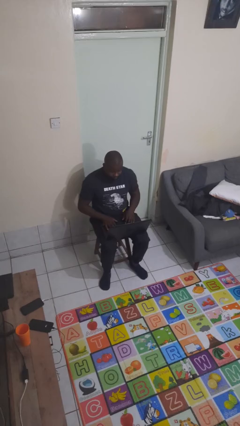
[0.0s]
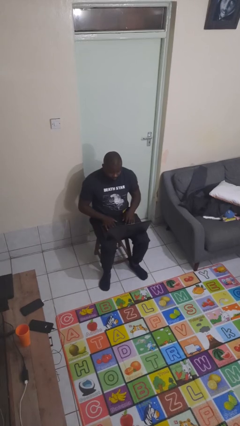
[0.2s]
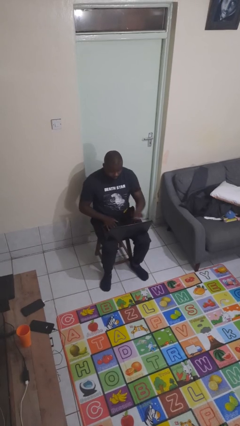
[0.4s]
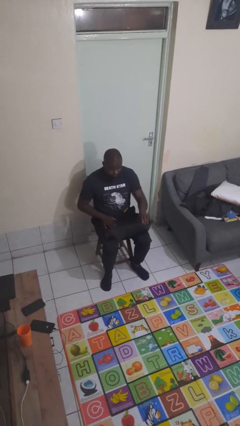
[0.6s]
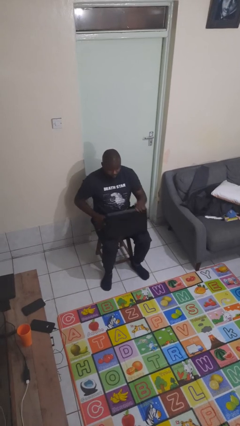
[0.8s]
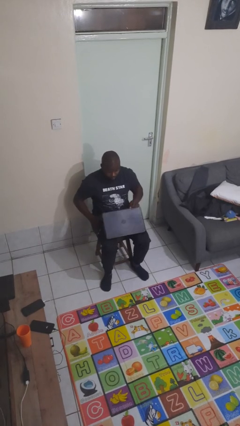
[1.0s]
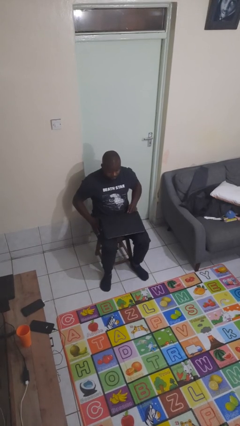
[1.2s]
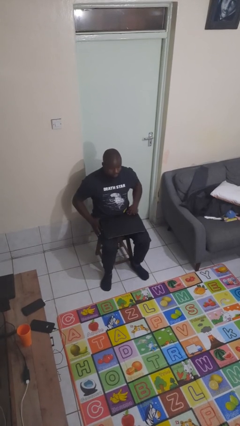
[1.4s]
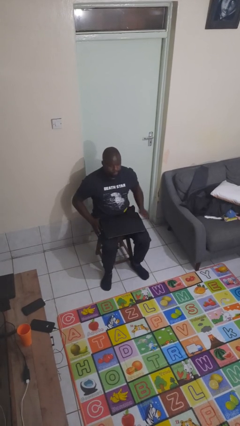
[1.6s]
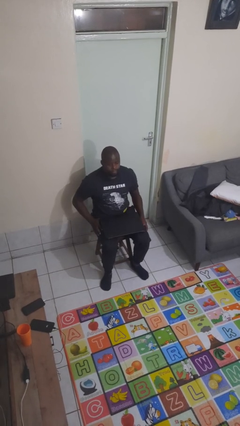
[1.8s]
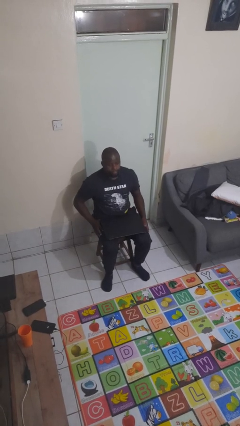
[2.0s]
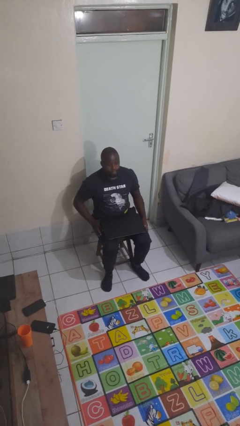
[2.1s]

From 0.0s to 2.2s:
person closes laptop

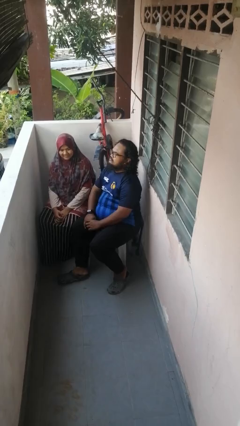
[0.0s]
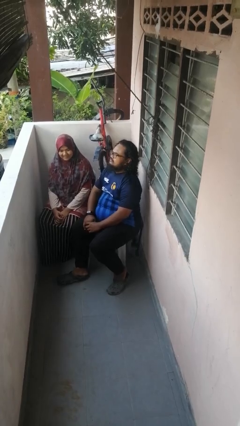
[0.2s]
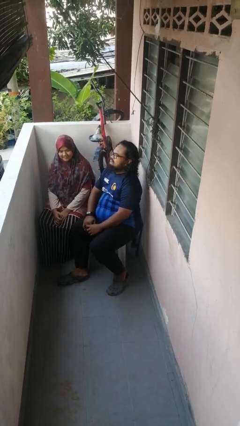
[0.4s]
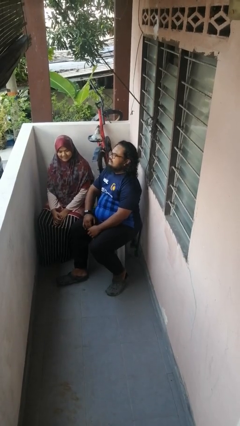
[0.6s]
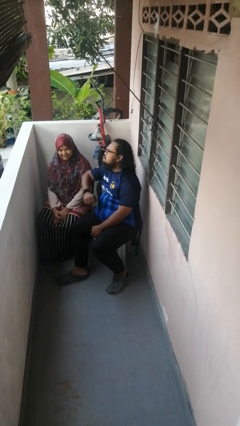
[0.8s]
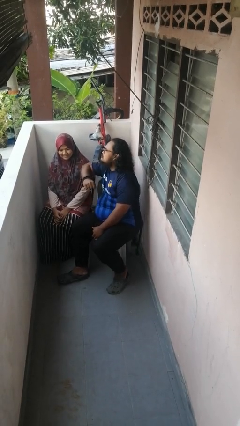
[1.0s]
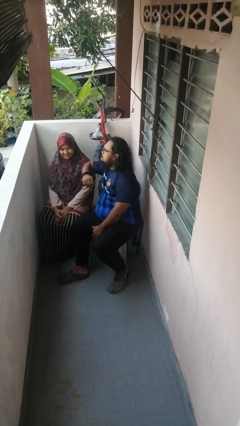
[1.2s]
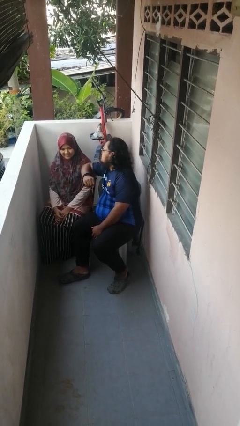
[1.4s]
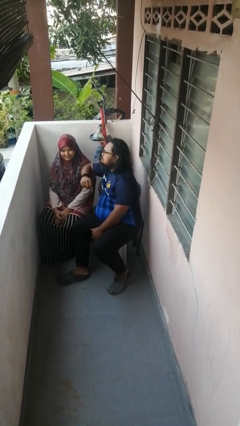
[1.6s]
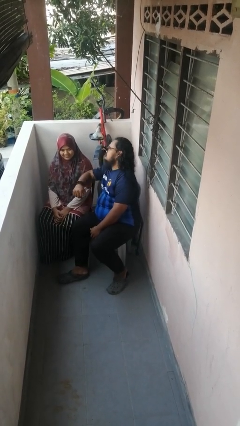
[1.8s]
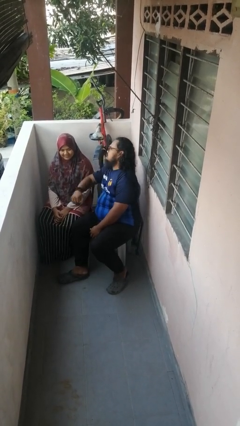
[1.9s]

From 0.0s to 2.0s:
person nudges person with elbow

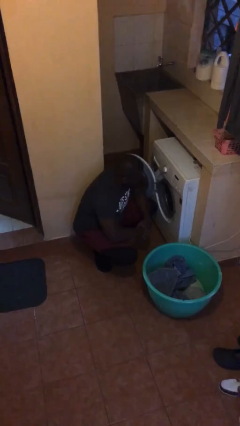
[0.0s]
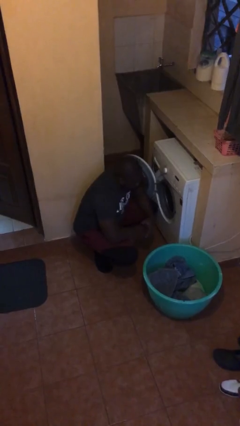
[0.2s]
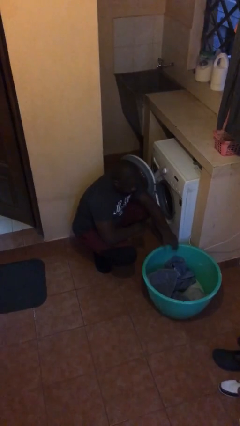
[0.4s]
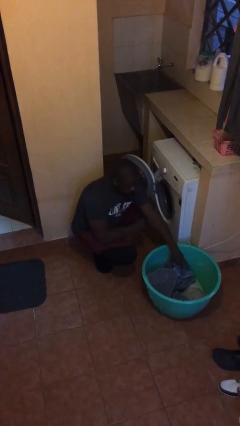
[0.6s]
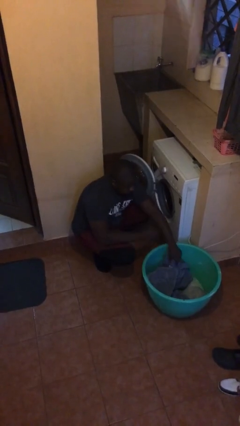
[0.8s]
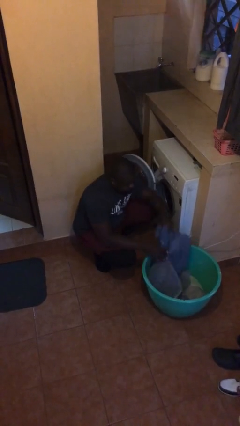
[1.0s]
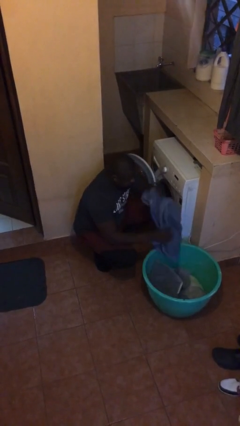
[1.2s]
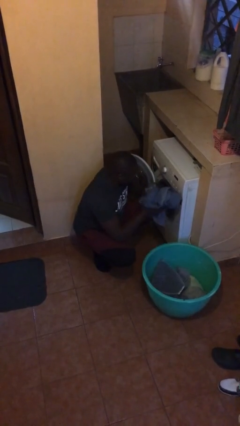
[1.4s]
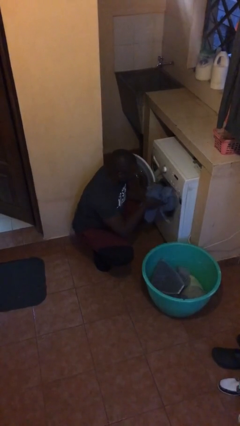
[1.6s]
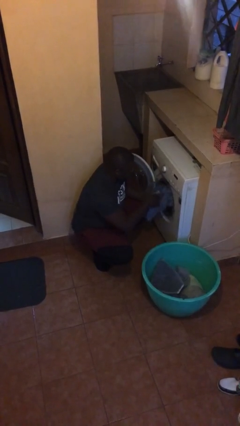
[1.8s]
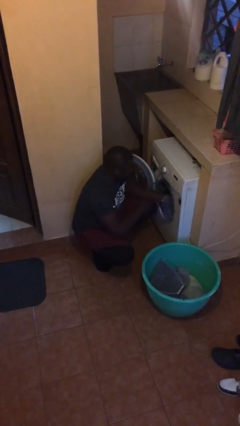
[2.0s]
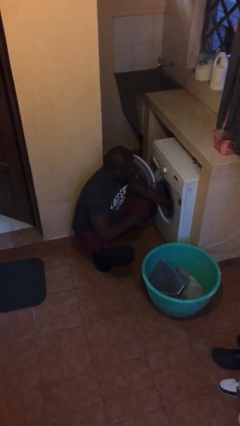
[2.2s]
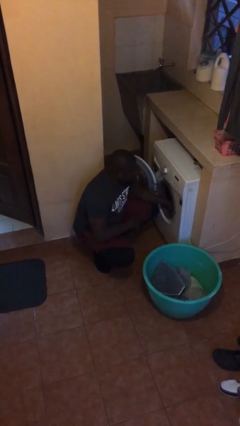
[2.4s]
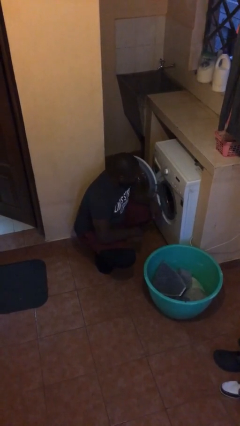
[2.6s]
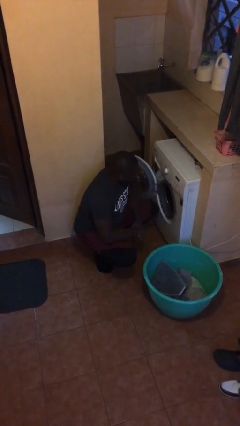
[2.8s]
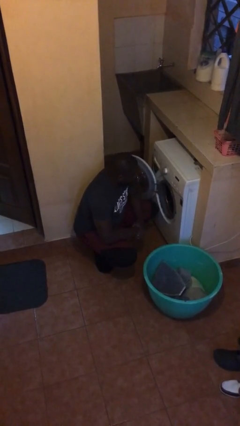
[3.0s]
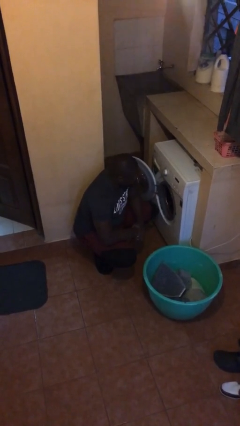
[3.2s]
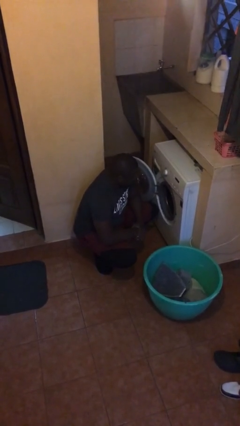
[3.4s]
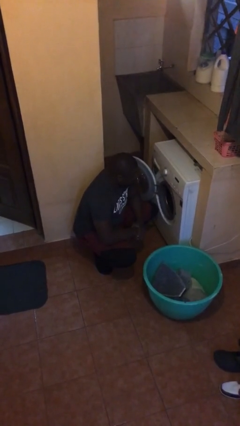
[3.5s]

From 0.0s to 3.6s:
person loads dryer

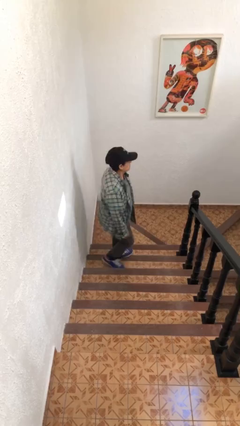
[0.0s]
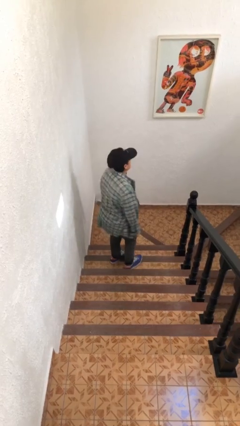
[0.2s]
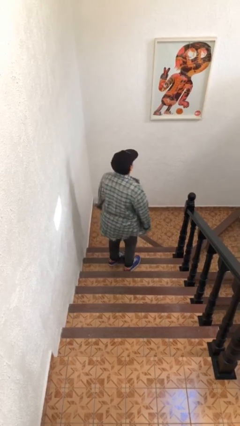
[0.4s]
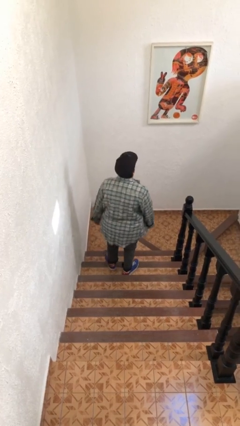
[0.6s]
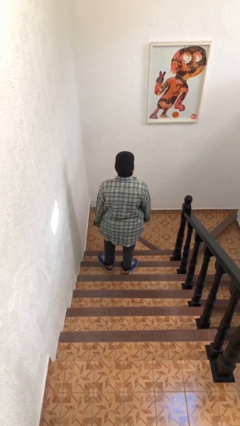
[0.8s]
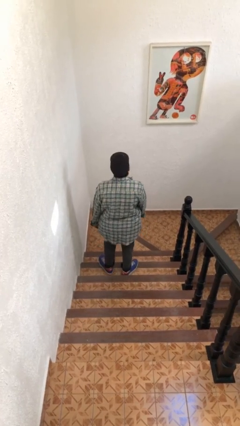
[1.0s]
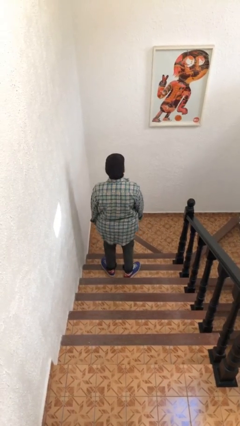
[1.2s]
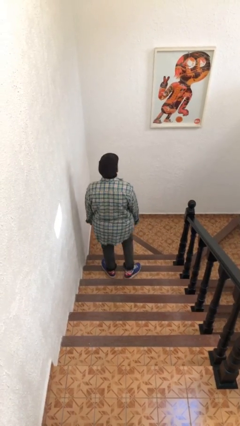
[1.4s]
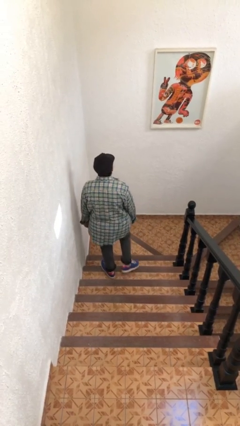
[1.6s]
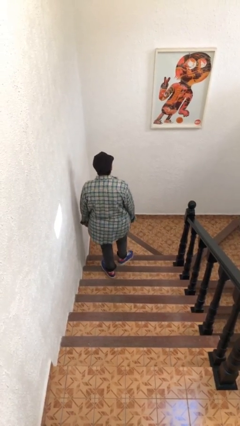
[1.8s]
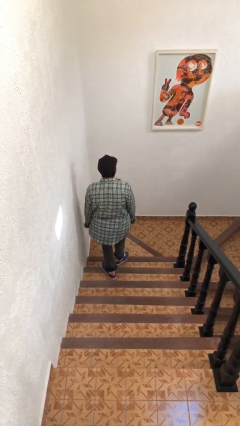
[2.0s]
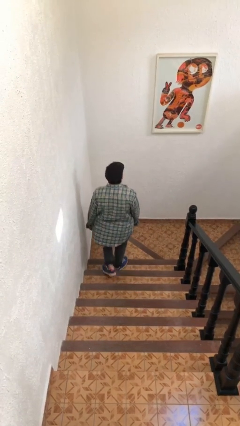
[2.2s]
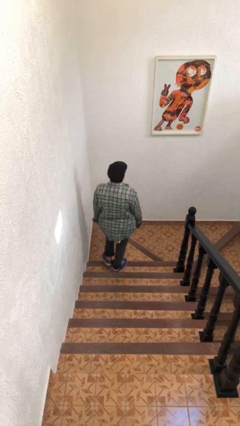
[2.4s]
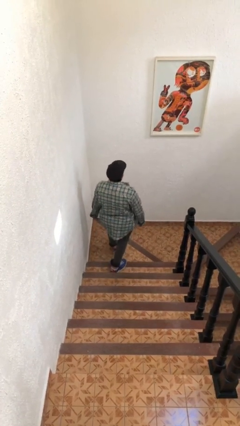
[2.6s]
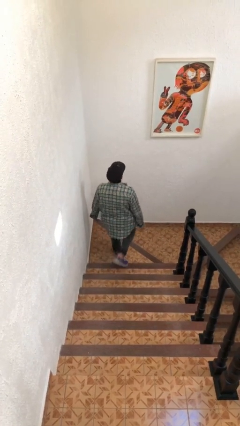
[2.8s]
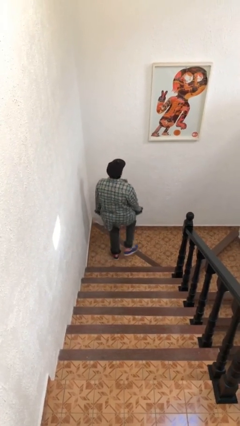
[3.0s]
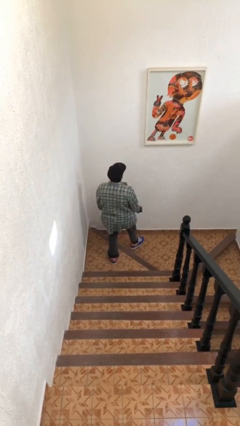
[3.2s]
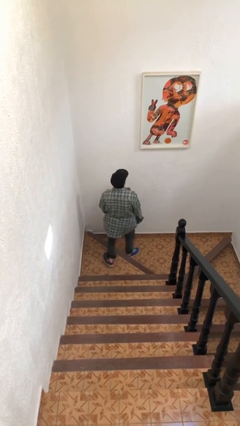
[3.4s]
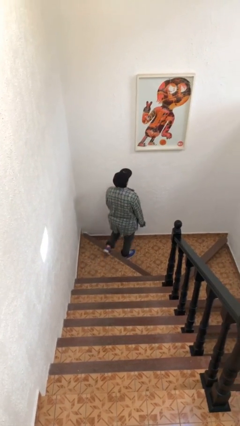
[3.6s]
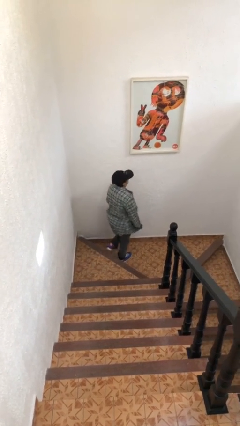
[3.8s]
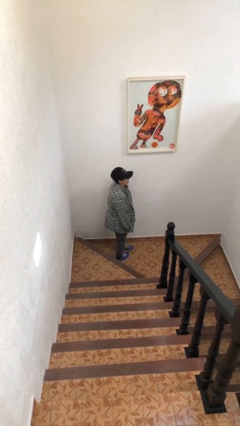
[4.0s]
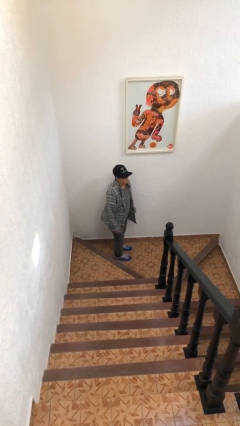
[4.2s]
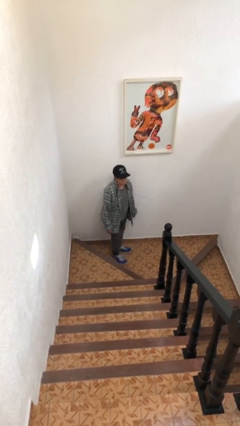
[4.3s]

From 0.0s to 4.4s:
person climbs down stairs

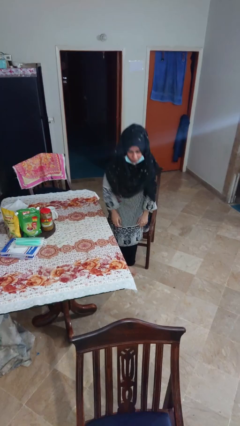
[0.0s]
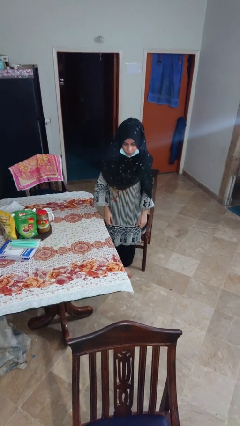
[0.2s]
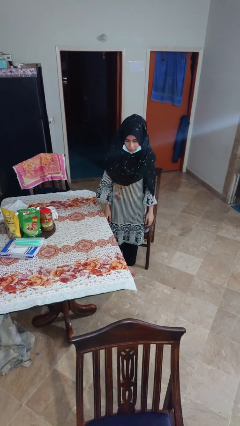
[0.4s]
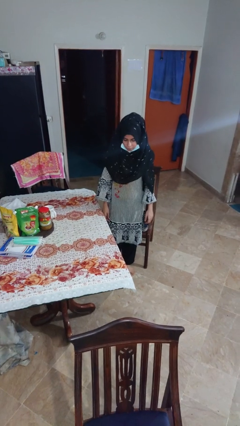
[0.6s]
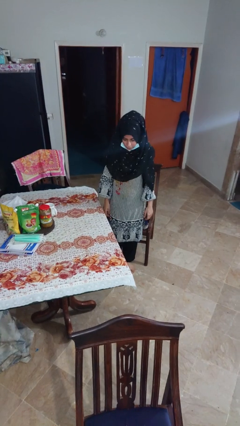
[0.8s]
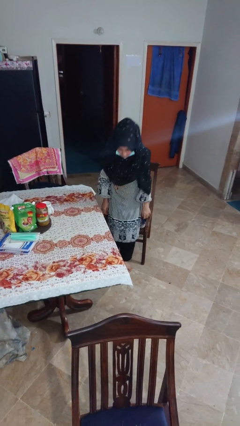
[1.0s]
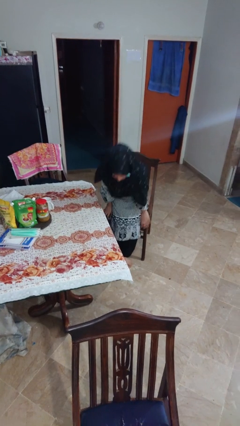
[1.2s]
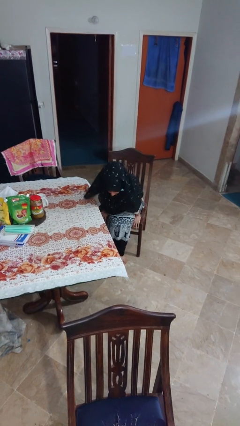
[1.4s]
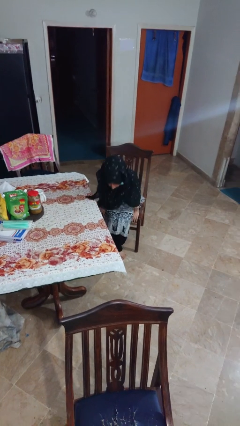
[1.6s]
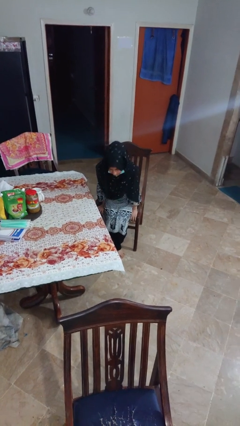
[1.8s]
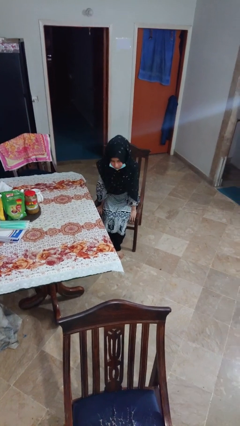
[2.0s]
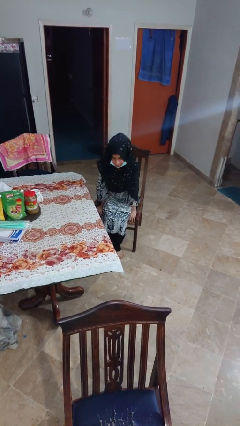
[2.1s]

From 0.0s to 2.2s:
person sits down

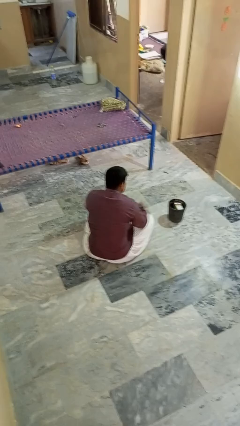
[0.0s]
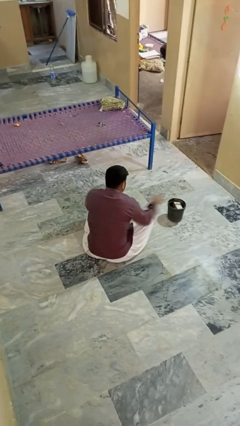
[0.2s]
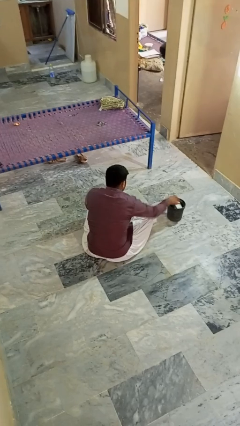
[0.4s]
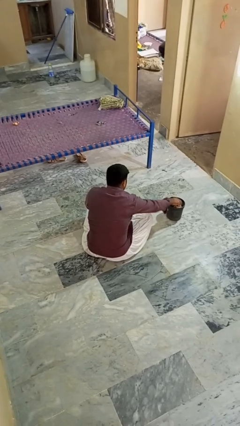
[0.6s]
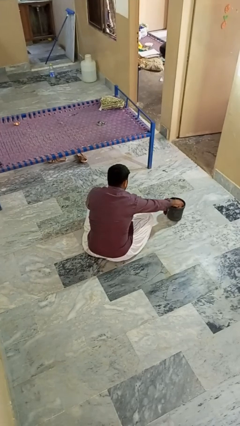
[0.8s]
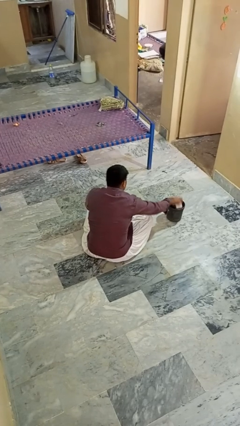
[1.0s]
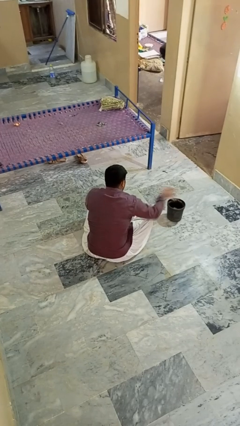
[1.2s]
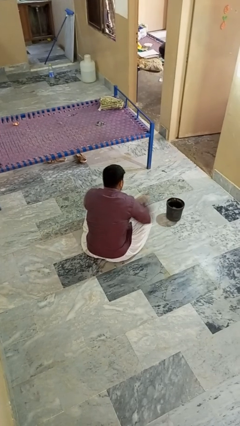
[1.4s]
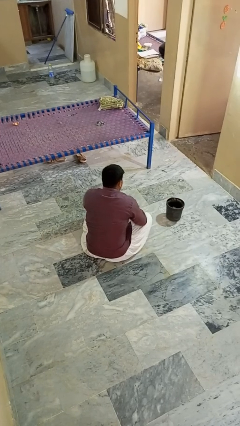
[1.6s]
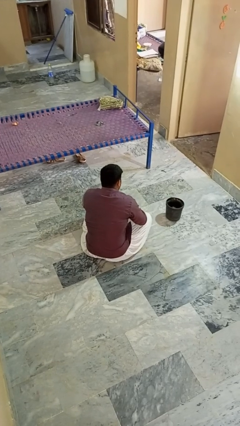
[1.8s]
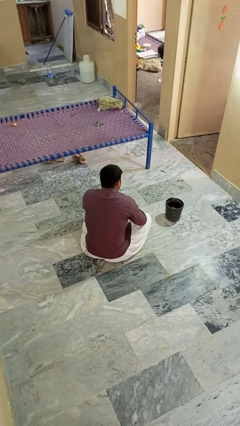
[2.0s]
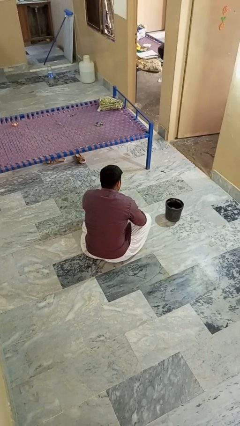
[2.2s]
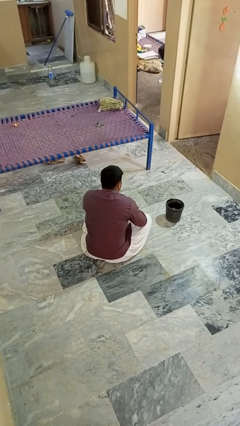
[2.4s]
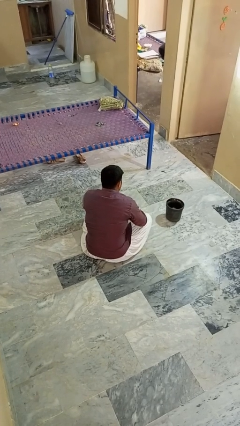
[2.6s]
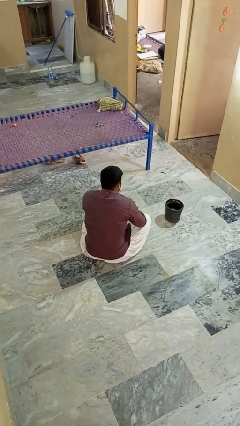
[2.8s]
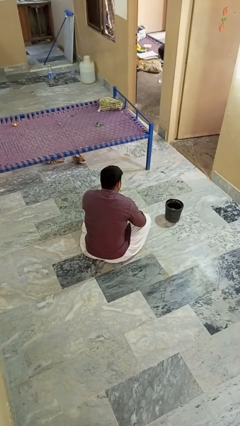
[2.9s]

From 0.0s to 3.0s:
person takes object from basket
